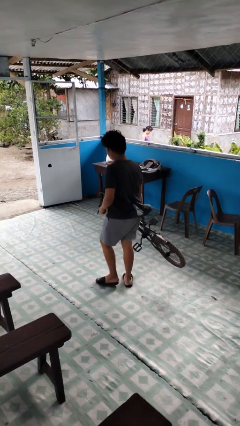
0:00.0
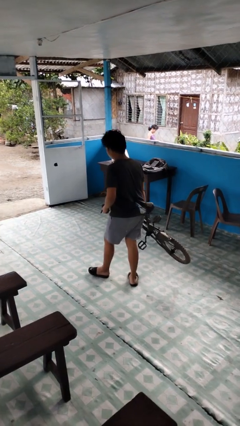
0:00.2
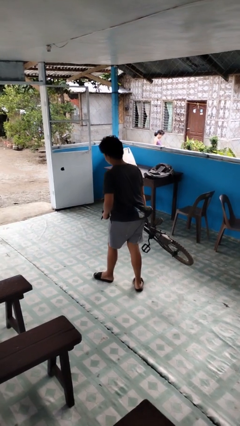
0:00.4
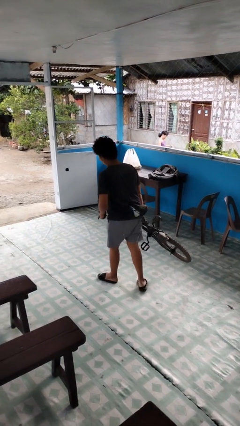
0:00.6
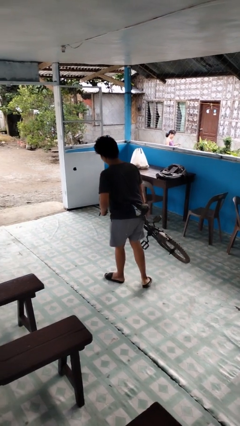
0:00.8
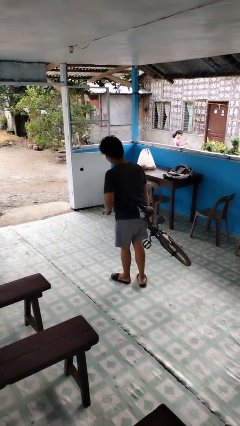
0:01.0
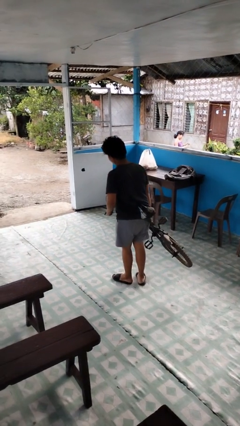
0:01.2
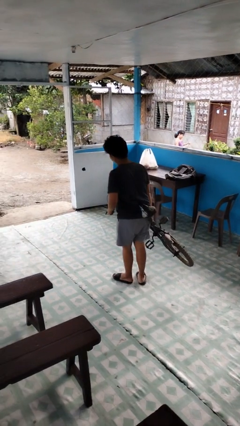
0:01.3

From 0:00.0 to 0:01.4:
person carries bicycle

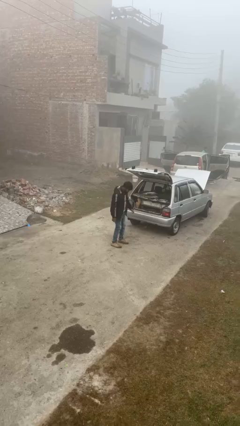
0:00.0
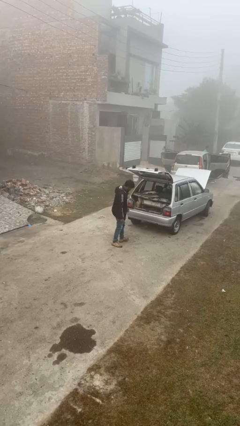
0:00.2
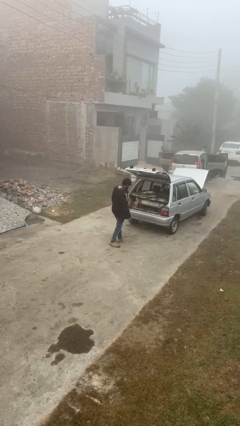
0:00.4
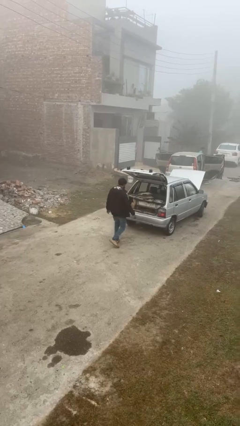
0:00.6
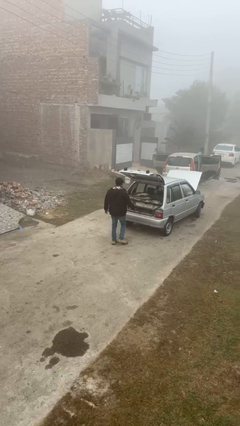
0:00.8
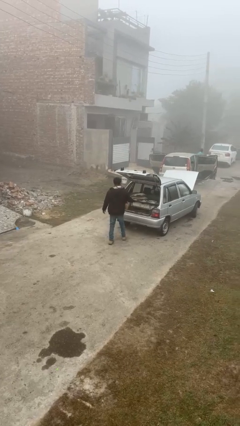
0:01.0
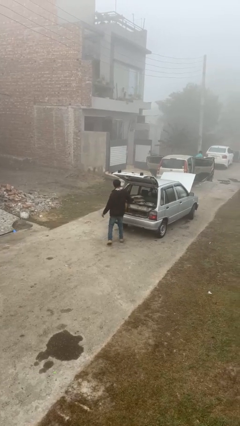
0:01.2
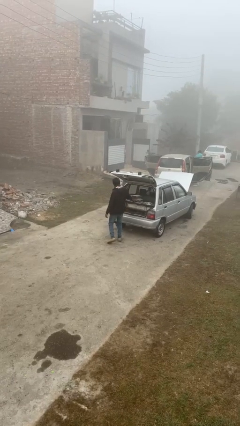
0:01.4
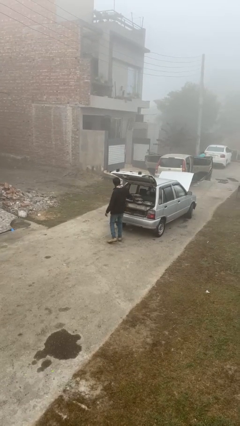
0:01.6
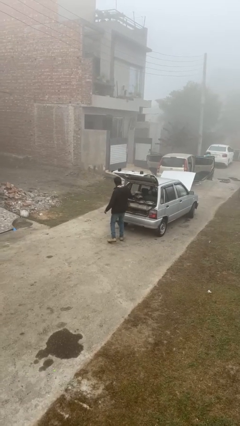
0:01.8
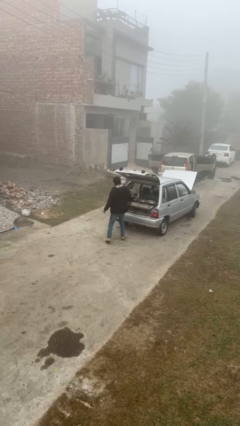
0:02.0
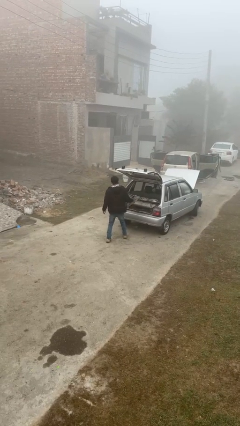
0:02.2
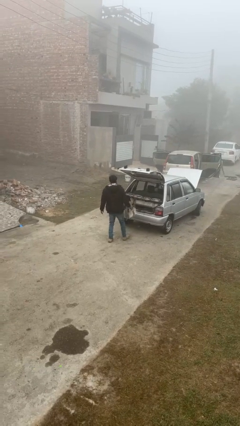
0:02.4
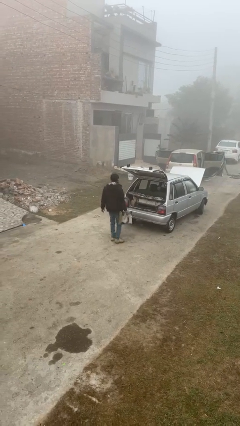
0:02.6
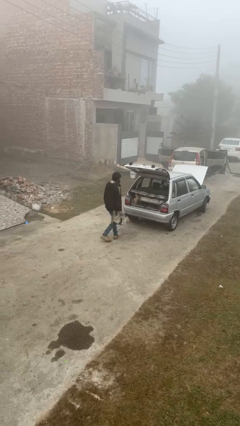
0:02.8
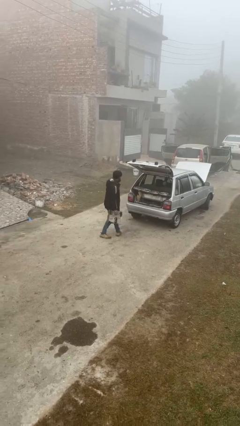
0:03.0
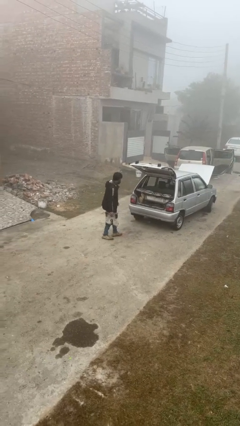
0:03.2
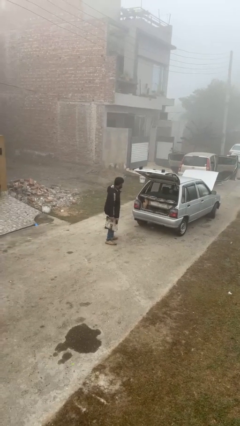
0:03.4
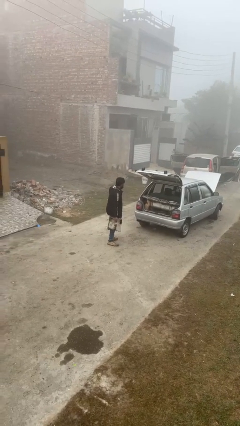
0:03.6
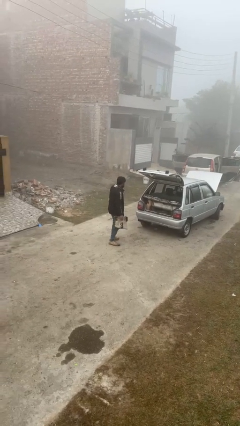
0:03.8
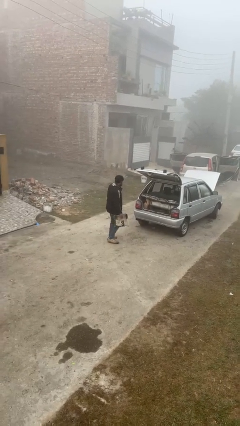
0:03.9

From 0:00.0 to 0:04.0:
person unloads car

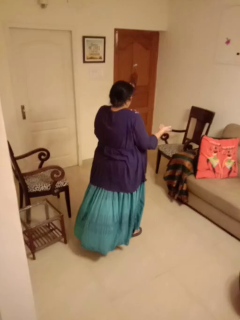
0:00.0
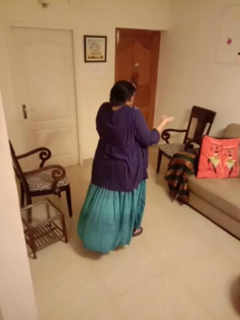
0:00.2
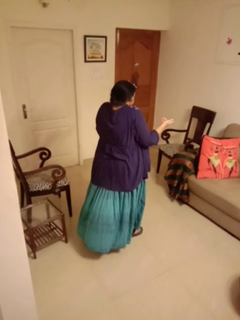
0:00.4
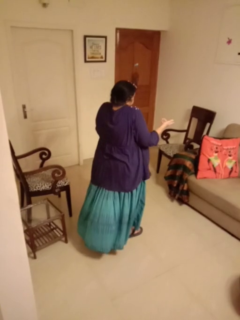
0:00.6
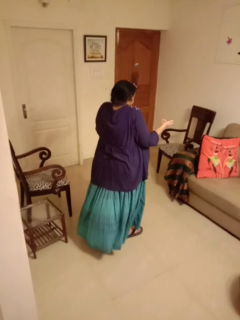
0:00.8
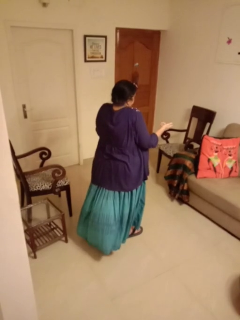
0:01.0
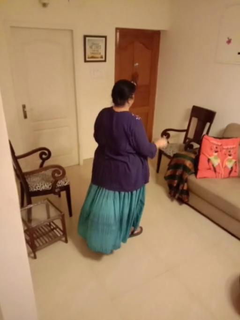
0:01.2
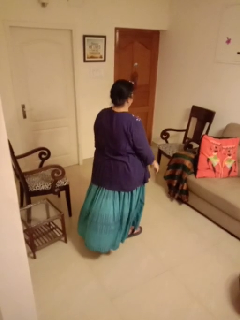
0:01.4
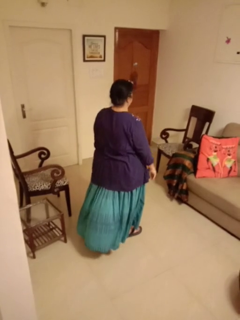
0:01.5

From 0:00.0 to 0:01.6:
person shrugs

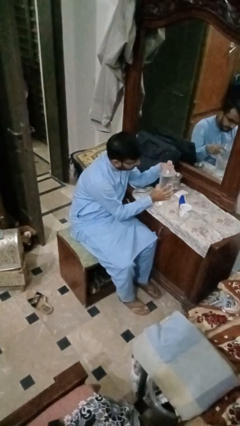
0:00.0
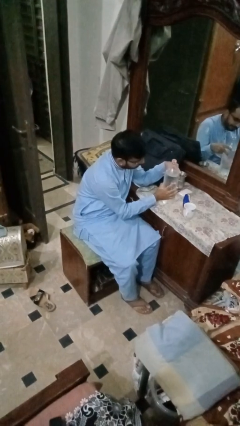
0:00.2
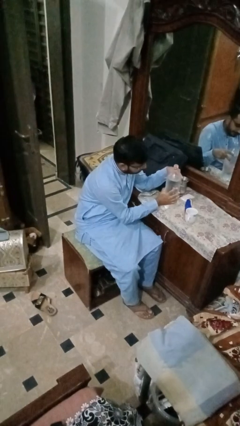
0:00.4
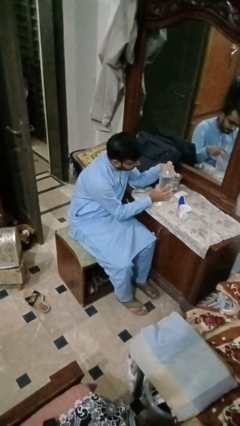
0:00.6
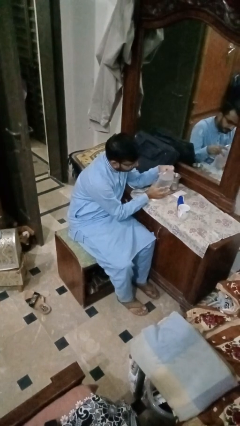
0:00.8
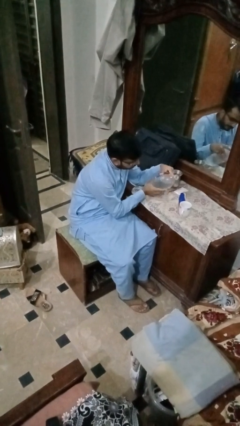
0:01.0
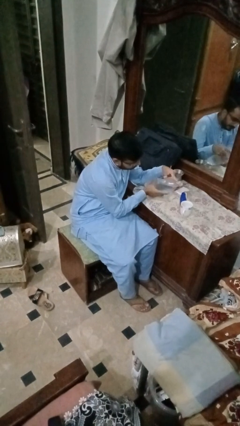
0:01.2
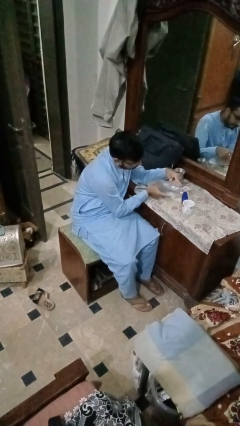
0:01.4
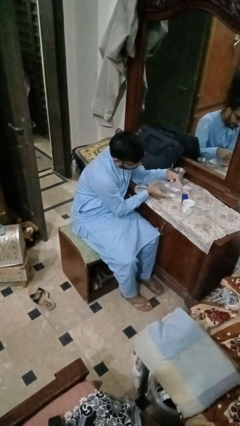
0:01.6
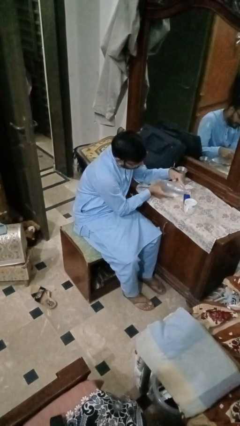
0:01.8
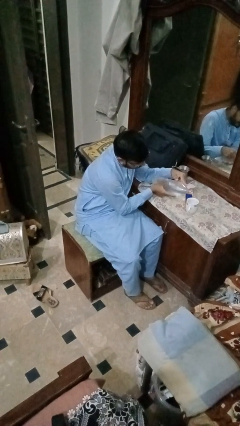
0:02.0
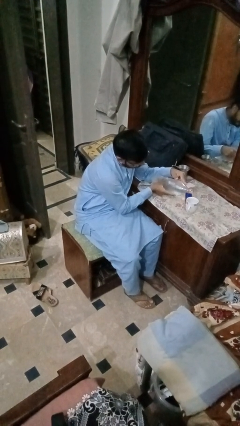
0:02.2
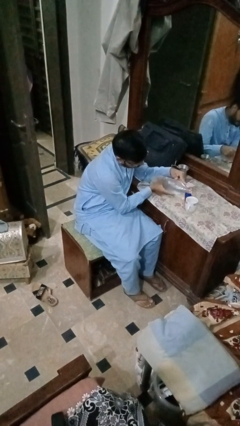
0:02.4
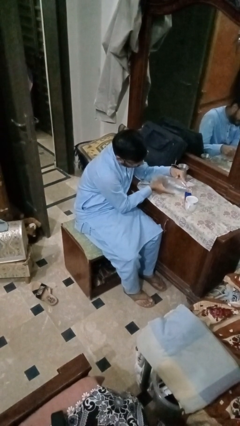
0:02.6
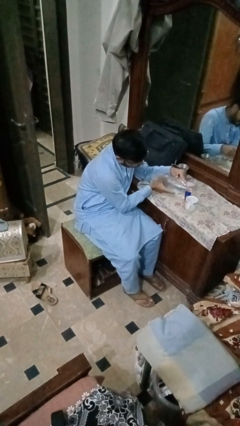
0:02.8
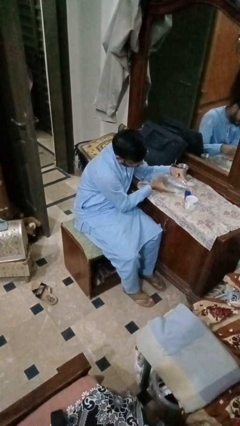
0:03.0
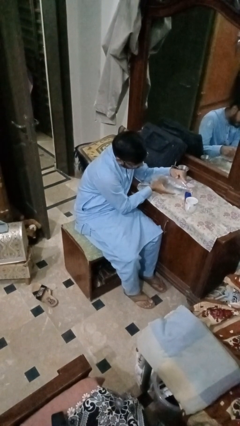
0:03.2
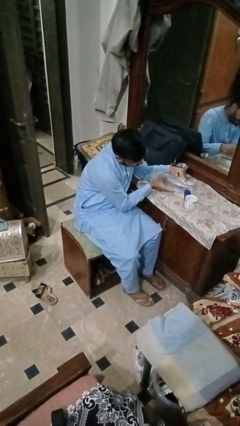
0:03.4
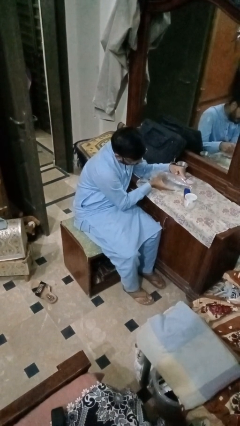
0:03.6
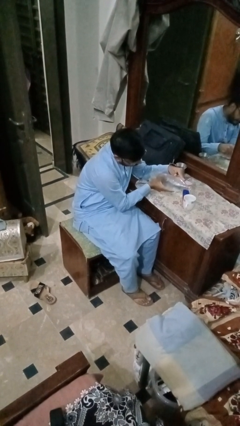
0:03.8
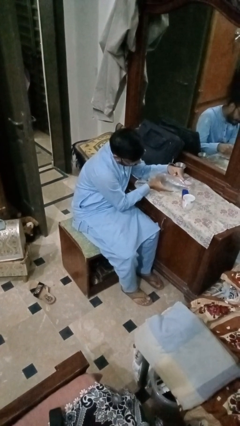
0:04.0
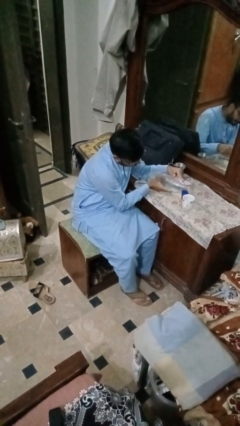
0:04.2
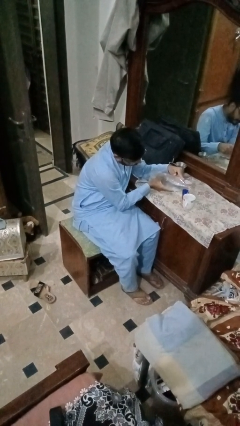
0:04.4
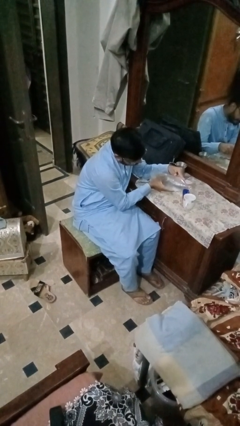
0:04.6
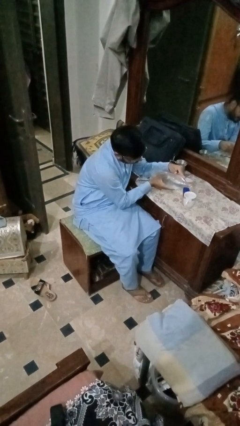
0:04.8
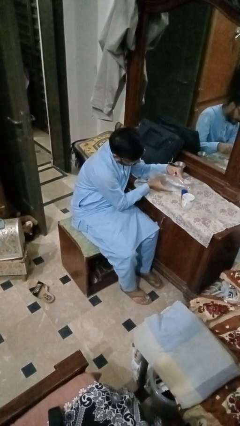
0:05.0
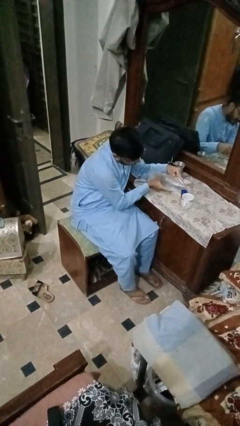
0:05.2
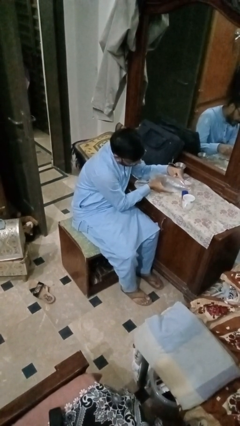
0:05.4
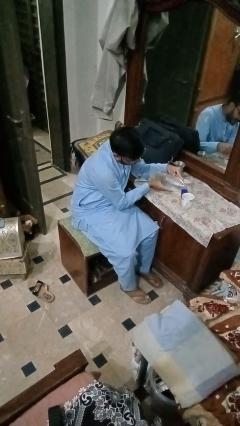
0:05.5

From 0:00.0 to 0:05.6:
person pours liquid into cup

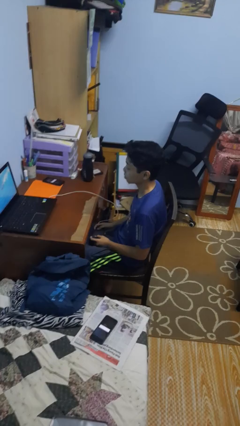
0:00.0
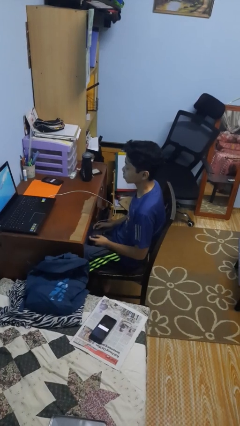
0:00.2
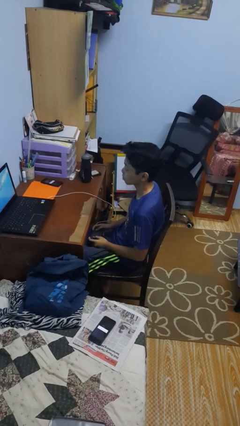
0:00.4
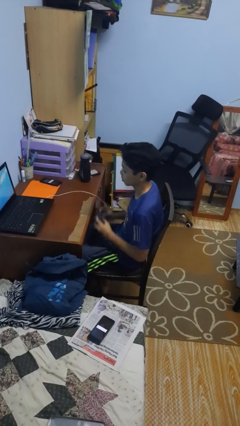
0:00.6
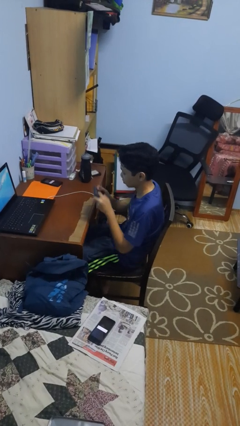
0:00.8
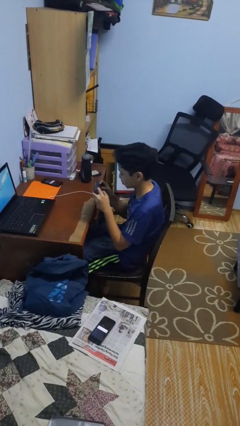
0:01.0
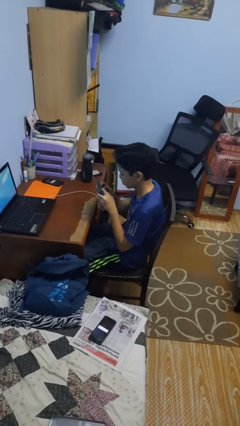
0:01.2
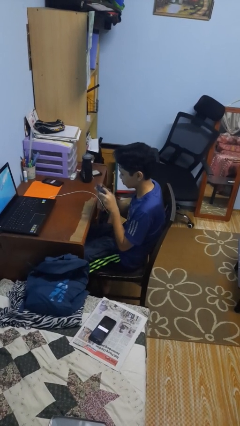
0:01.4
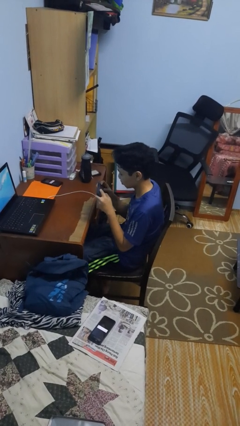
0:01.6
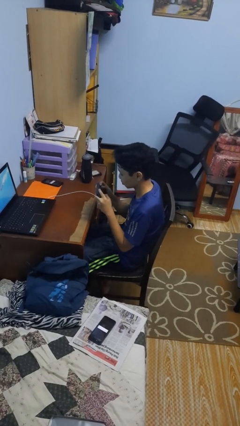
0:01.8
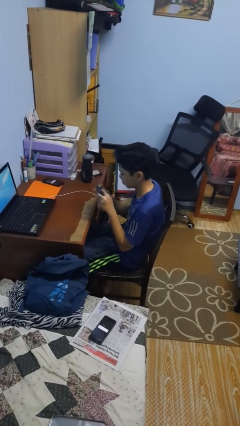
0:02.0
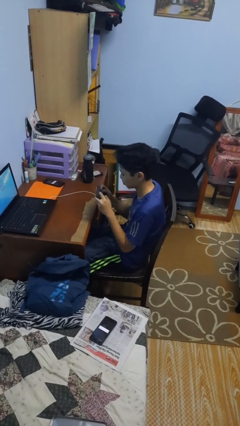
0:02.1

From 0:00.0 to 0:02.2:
person interacts with handheld game

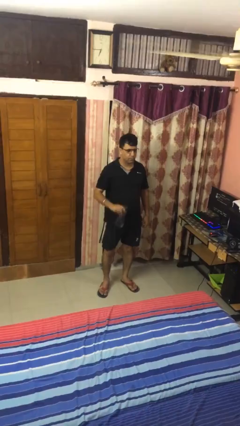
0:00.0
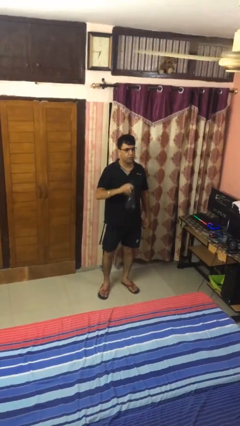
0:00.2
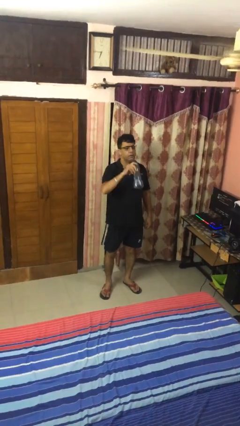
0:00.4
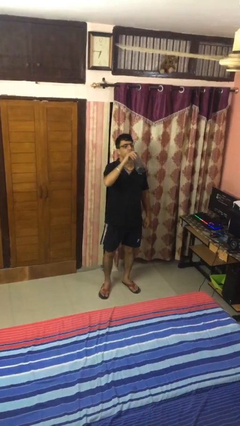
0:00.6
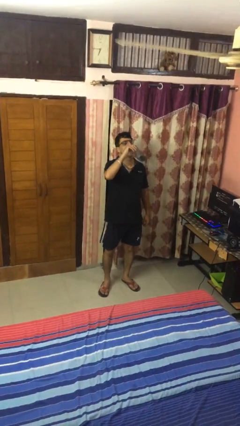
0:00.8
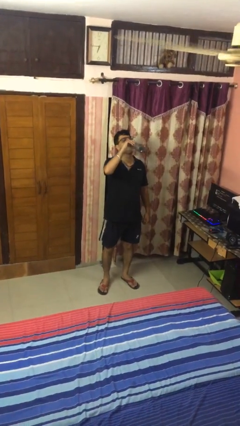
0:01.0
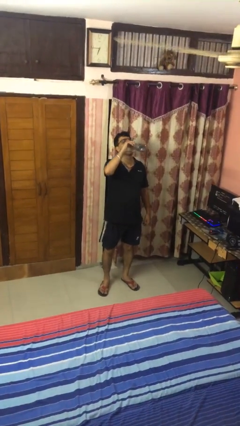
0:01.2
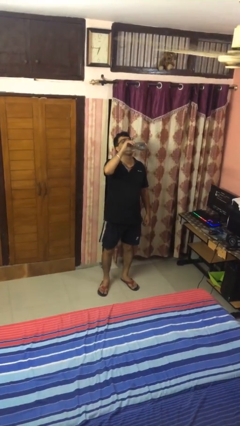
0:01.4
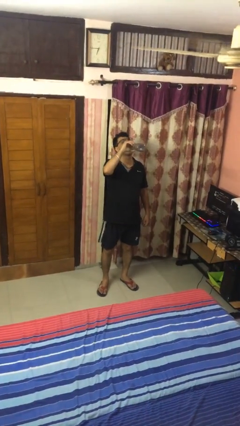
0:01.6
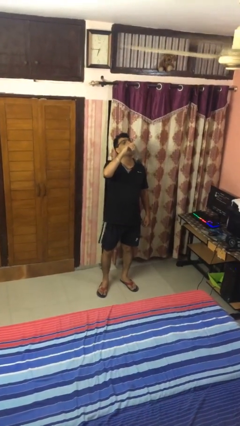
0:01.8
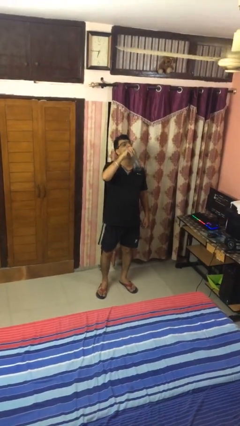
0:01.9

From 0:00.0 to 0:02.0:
person drinks from bottle

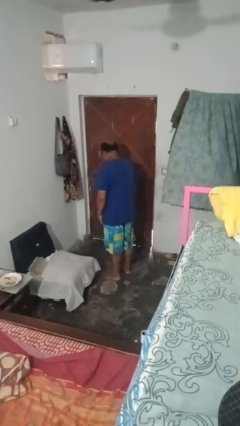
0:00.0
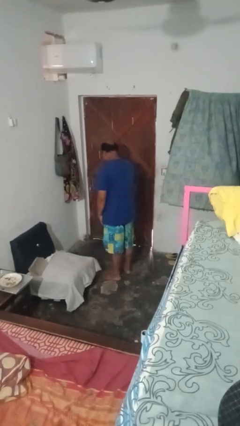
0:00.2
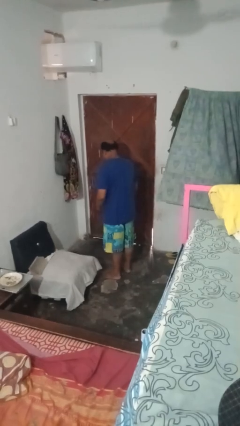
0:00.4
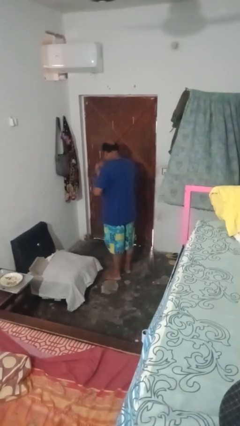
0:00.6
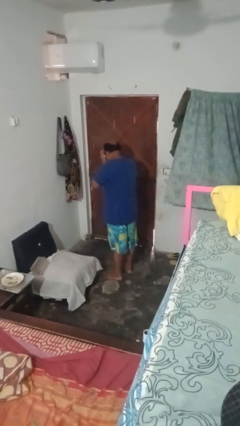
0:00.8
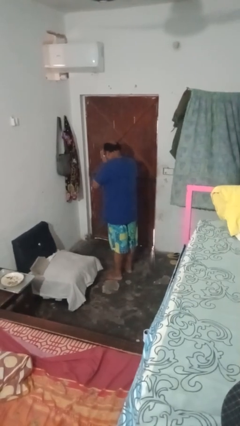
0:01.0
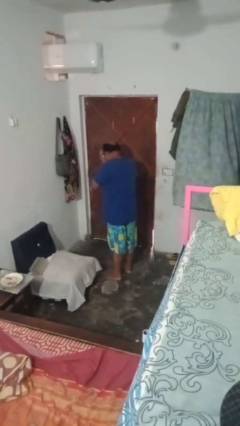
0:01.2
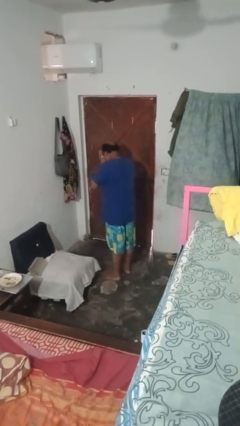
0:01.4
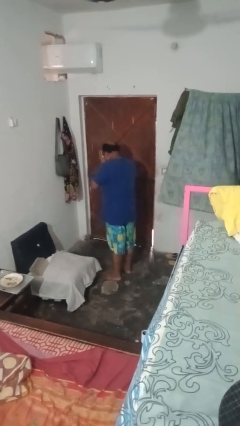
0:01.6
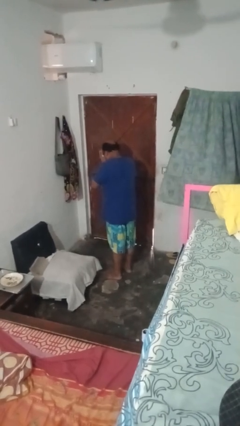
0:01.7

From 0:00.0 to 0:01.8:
person covers face with hands
